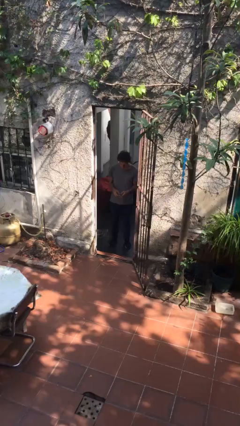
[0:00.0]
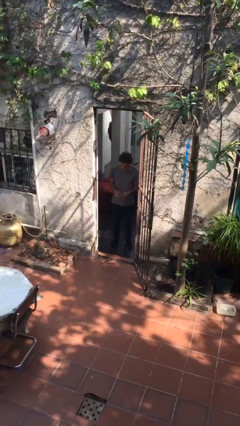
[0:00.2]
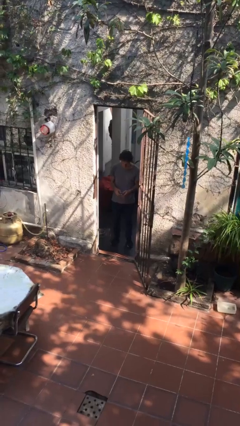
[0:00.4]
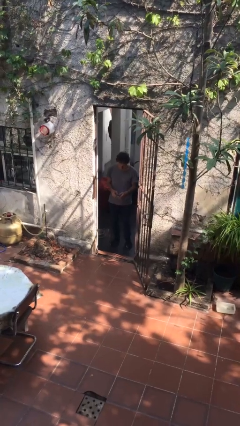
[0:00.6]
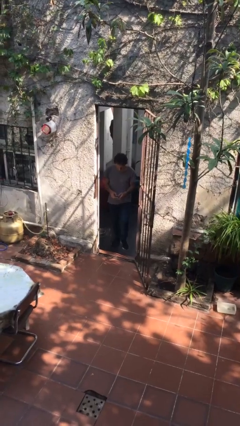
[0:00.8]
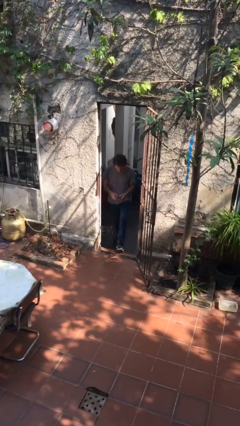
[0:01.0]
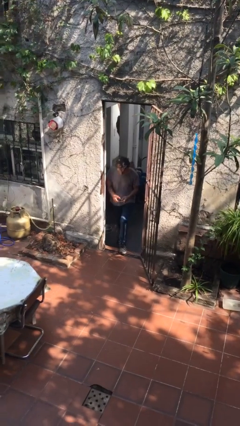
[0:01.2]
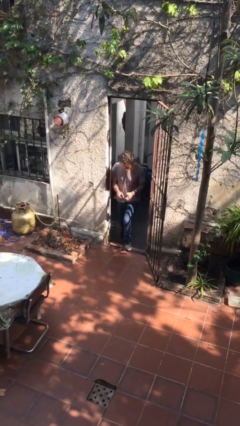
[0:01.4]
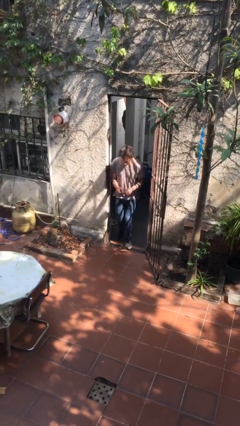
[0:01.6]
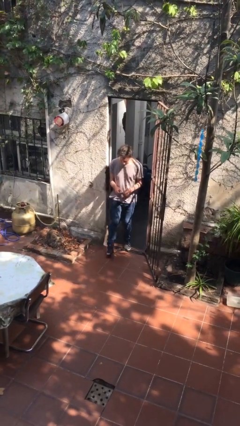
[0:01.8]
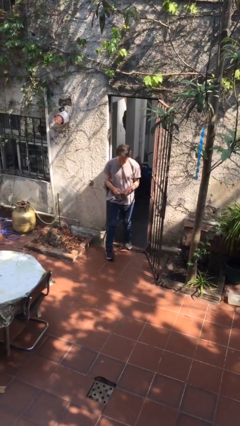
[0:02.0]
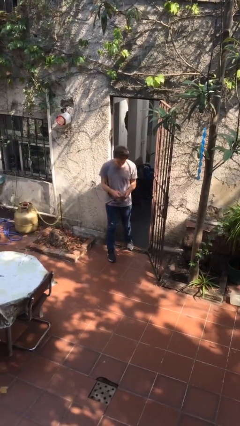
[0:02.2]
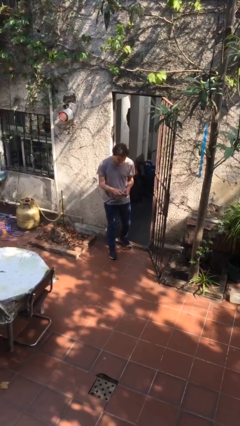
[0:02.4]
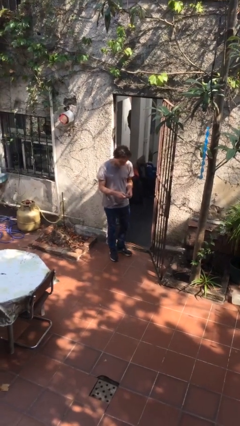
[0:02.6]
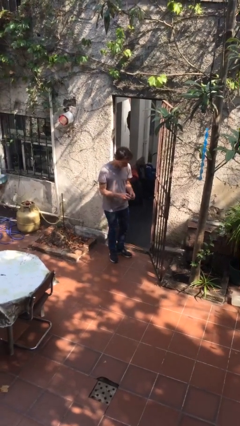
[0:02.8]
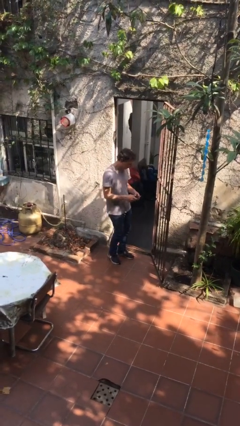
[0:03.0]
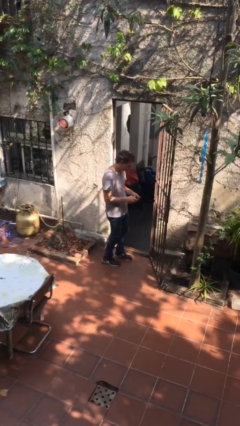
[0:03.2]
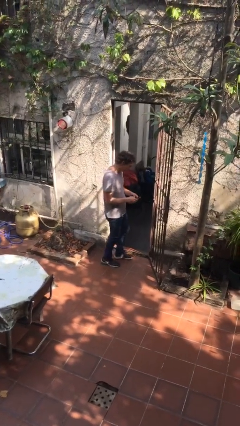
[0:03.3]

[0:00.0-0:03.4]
person enters scene through structure

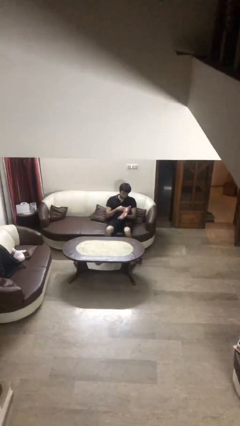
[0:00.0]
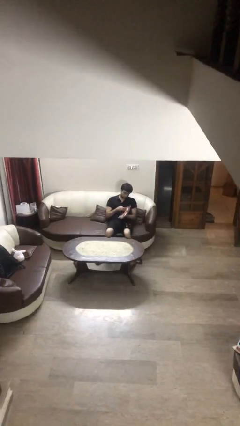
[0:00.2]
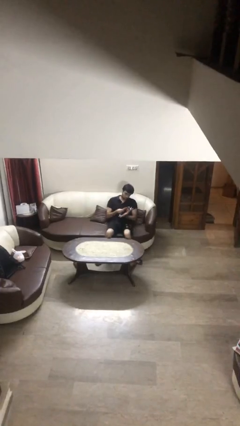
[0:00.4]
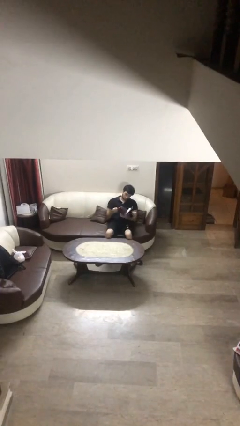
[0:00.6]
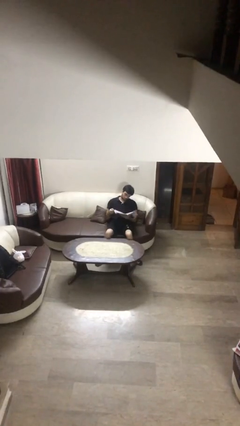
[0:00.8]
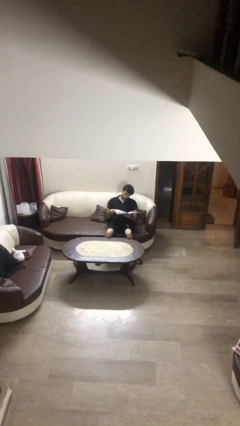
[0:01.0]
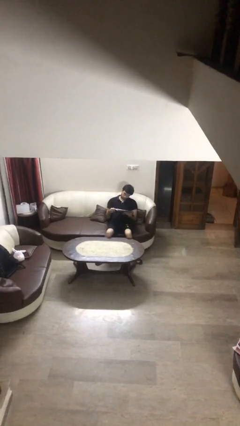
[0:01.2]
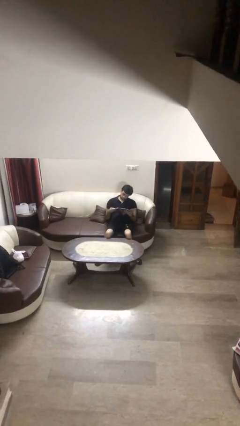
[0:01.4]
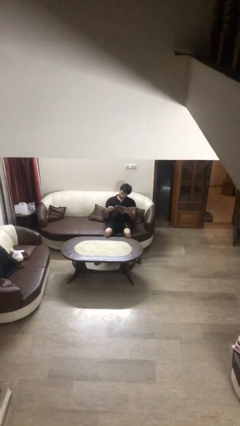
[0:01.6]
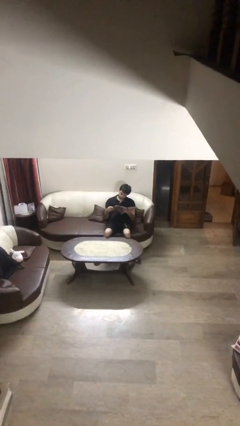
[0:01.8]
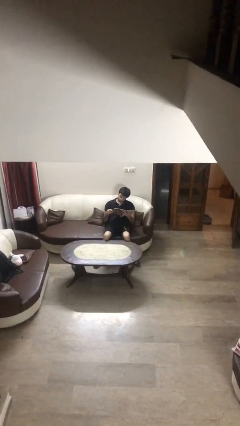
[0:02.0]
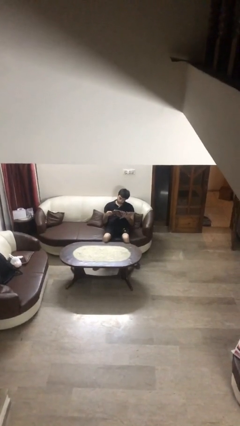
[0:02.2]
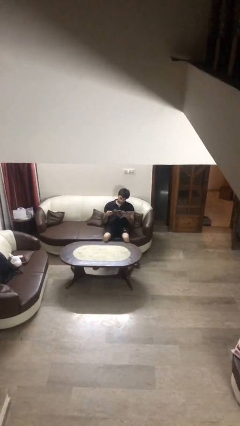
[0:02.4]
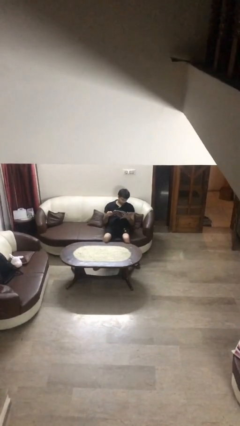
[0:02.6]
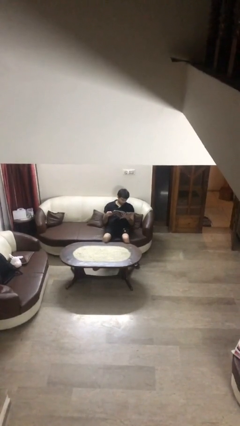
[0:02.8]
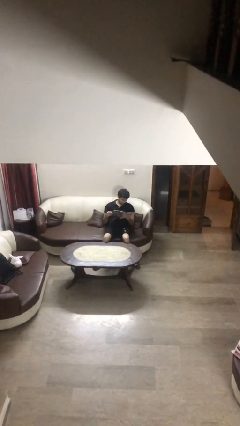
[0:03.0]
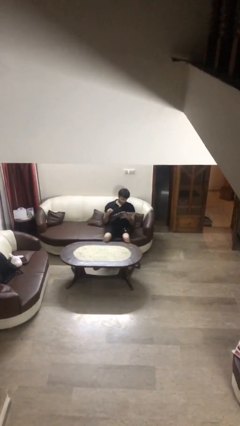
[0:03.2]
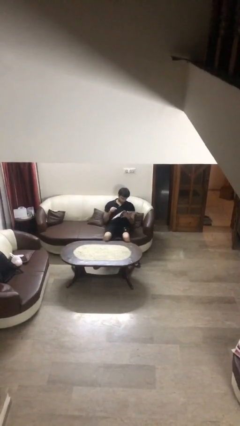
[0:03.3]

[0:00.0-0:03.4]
person reads document

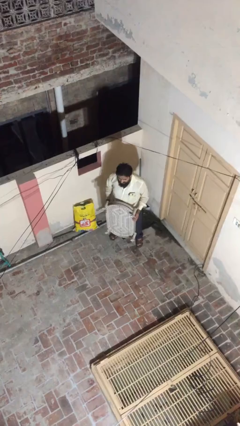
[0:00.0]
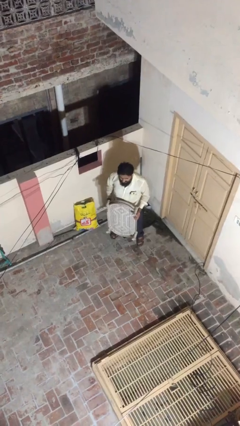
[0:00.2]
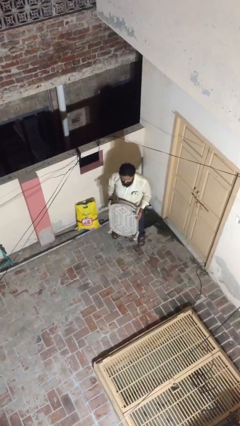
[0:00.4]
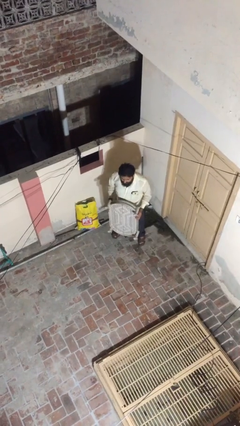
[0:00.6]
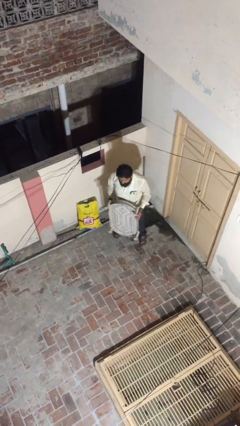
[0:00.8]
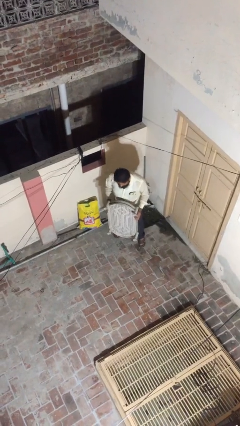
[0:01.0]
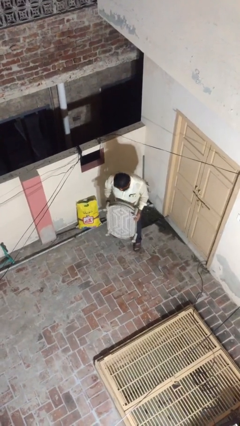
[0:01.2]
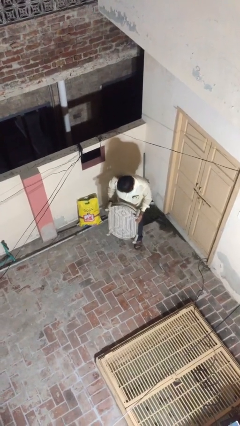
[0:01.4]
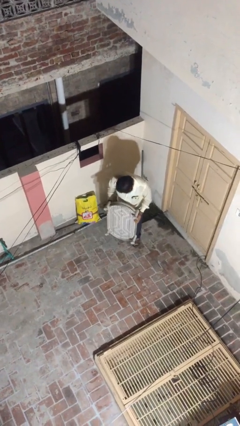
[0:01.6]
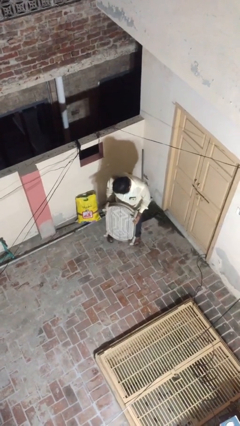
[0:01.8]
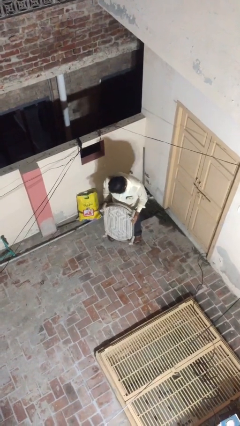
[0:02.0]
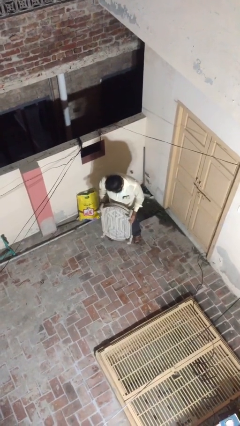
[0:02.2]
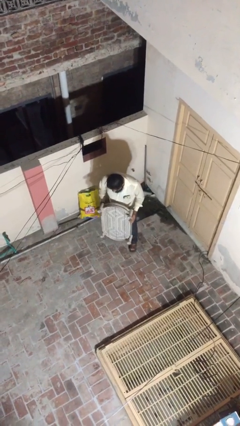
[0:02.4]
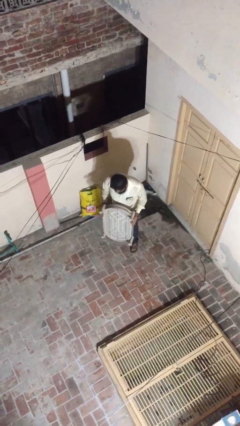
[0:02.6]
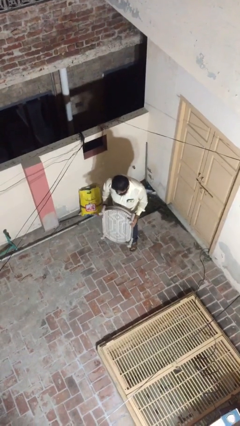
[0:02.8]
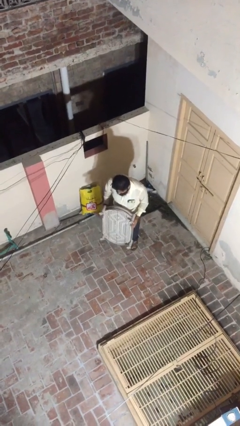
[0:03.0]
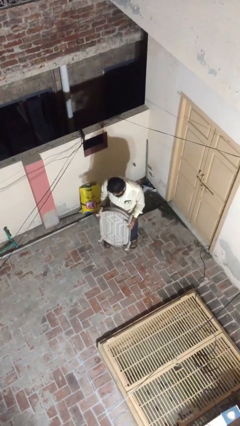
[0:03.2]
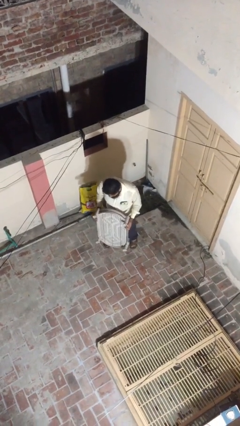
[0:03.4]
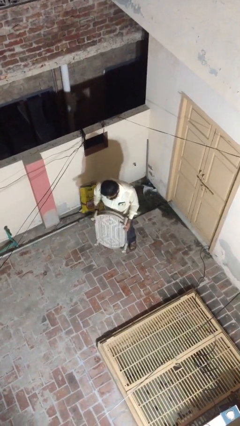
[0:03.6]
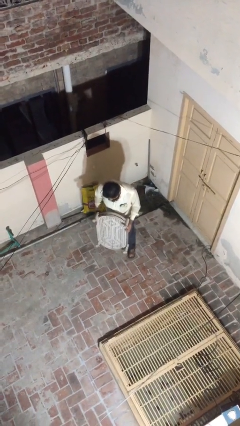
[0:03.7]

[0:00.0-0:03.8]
person carries heavy object

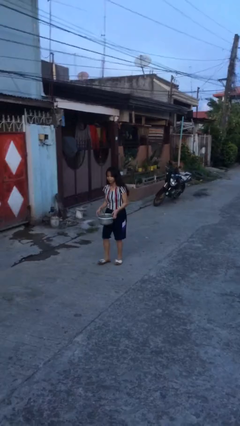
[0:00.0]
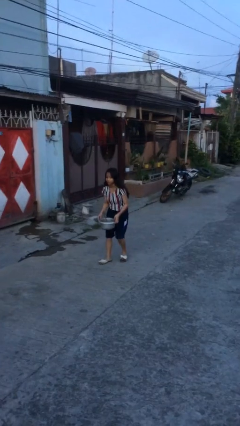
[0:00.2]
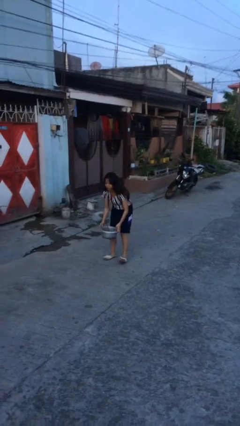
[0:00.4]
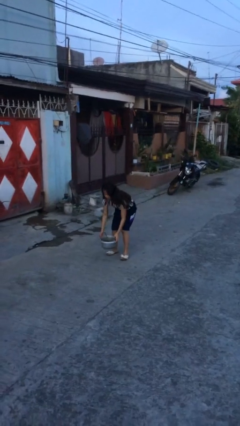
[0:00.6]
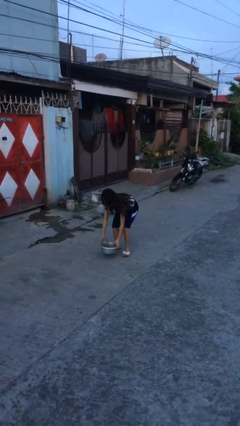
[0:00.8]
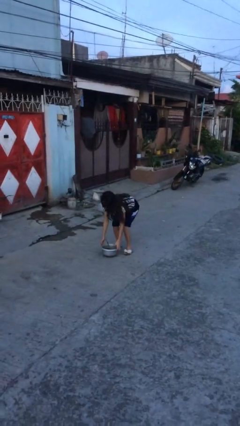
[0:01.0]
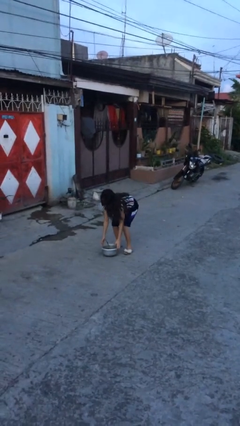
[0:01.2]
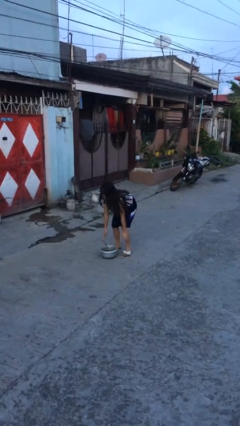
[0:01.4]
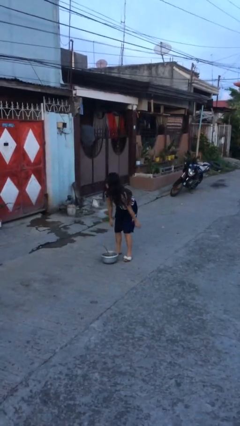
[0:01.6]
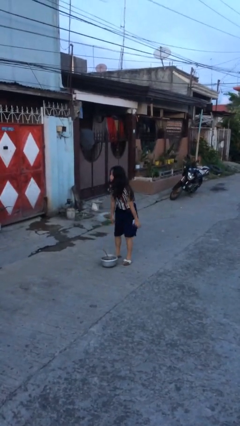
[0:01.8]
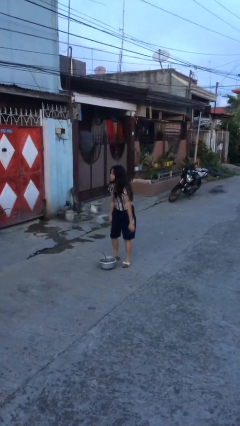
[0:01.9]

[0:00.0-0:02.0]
person puts down object on floor

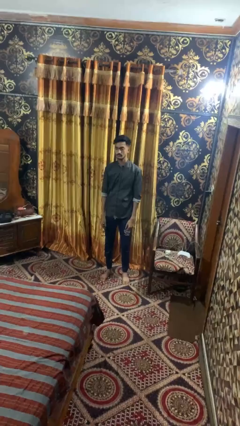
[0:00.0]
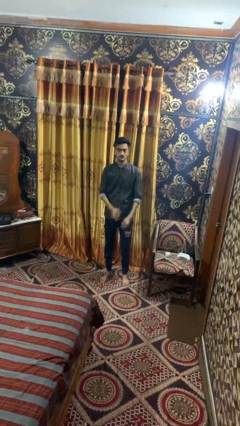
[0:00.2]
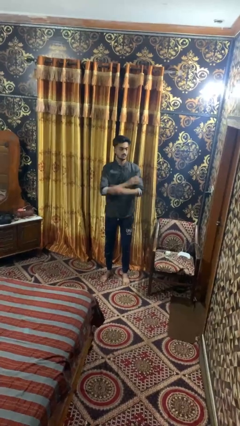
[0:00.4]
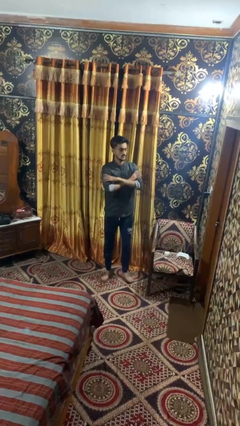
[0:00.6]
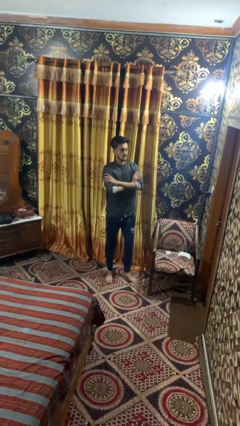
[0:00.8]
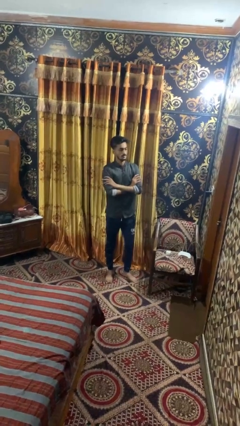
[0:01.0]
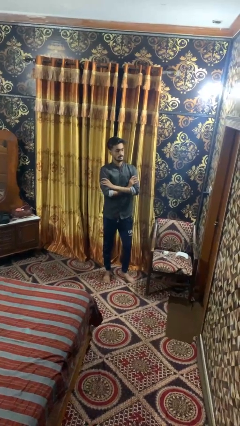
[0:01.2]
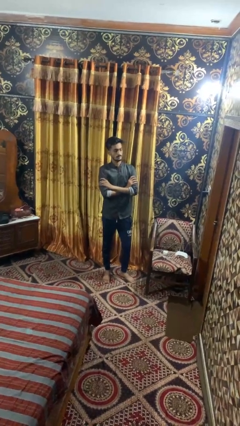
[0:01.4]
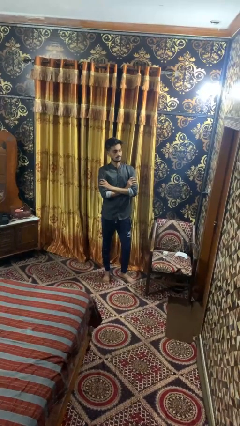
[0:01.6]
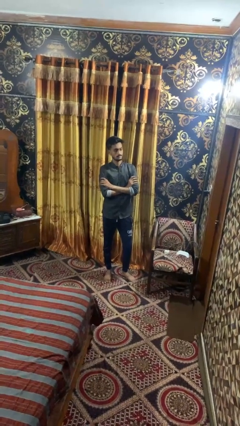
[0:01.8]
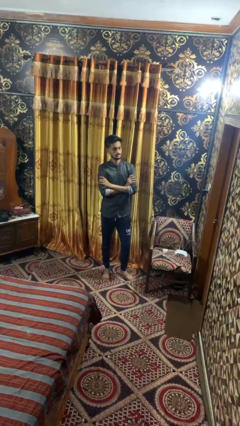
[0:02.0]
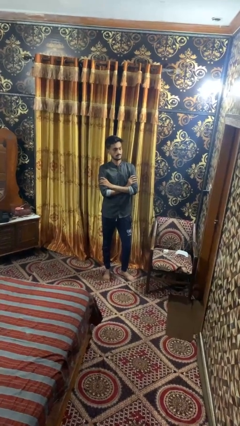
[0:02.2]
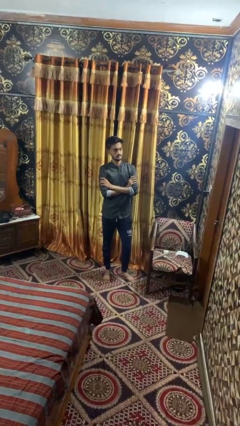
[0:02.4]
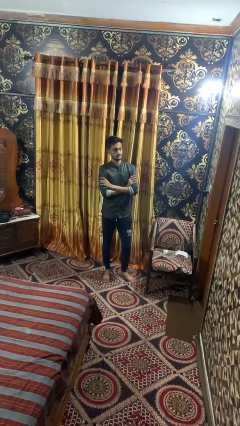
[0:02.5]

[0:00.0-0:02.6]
person crosses arms

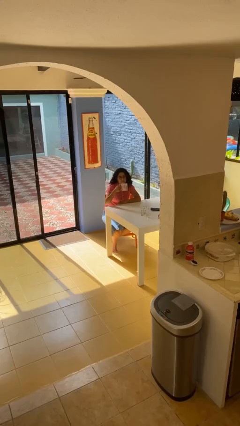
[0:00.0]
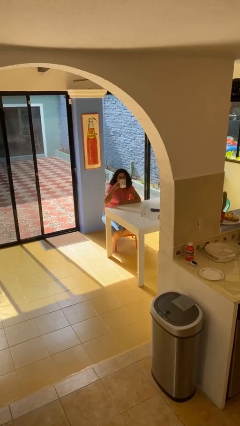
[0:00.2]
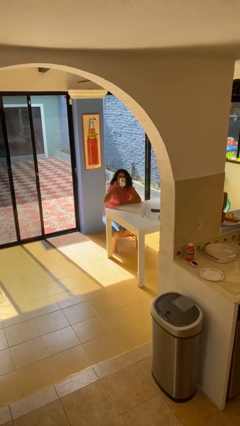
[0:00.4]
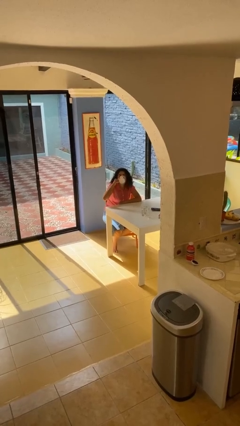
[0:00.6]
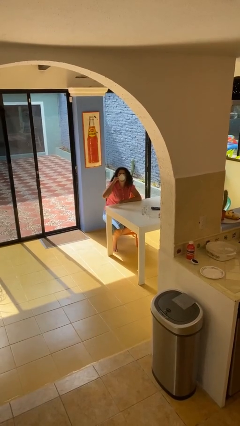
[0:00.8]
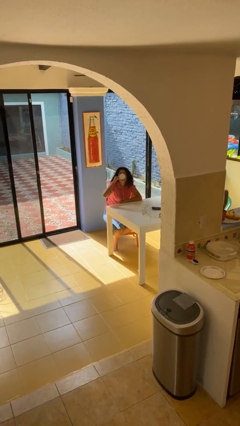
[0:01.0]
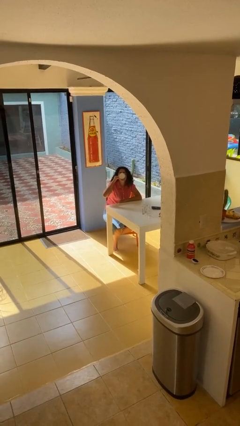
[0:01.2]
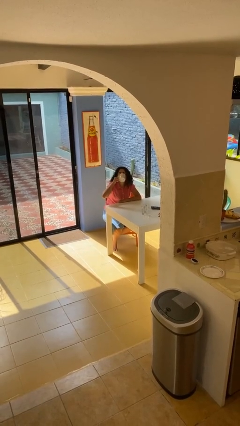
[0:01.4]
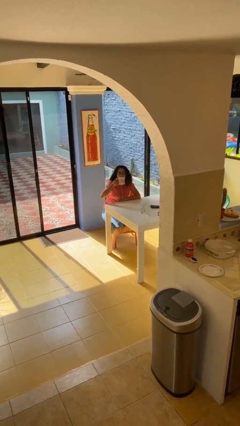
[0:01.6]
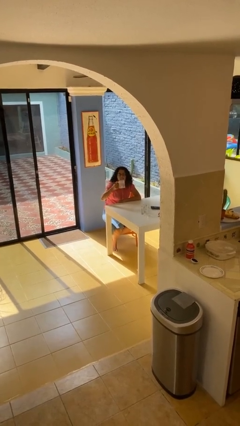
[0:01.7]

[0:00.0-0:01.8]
person drinks from mug

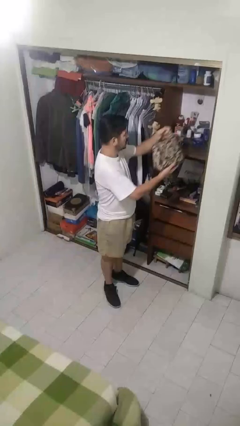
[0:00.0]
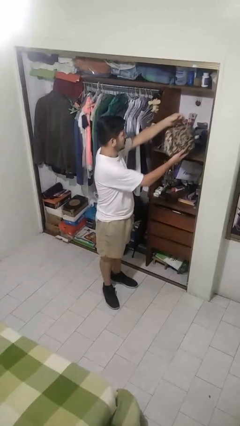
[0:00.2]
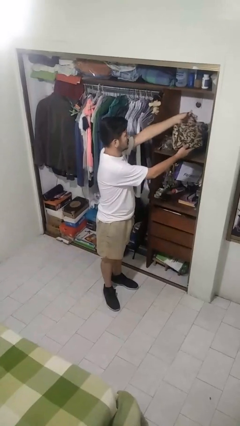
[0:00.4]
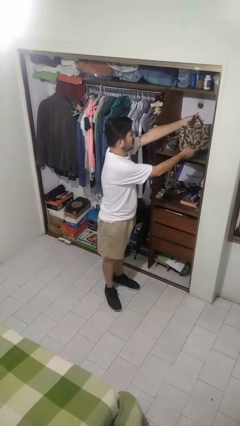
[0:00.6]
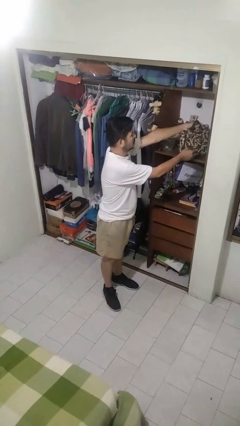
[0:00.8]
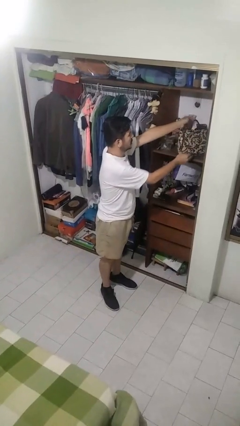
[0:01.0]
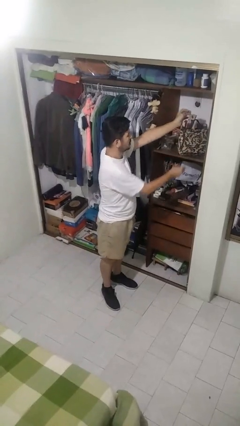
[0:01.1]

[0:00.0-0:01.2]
person picks up object from shelf
